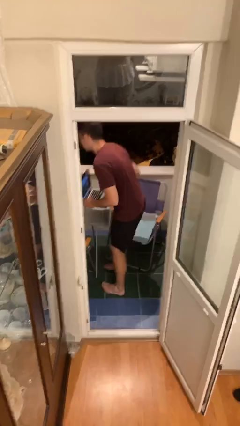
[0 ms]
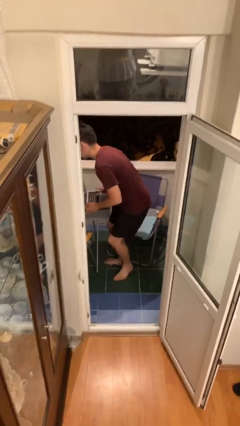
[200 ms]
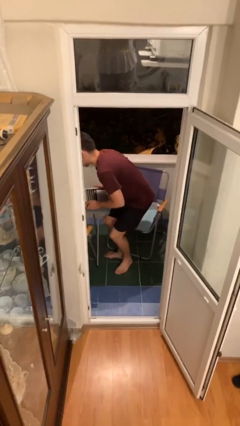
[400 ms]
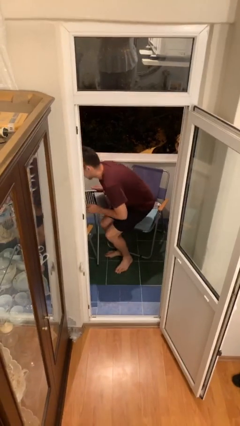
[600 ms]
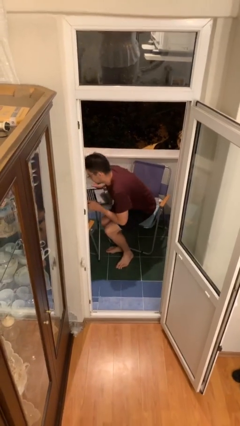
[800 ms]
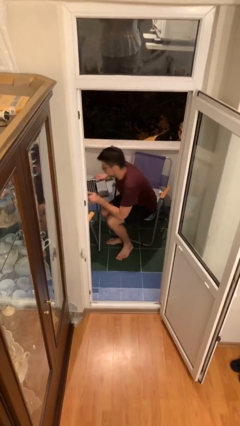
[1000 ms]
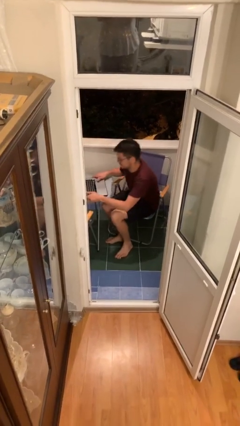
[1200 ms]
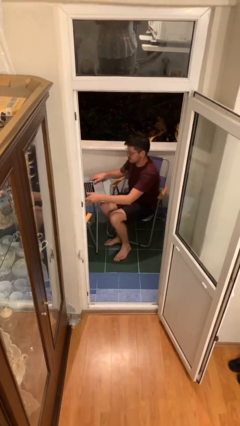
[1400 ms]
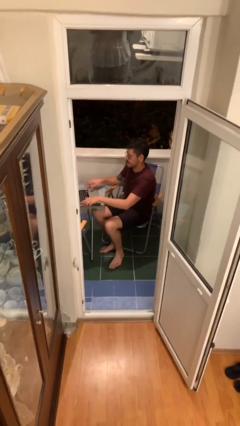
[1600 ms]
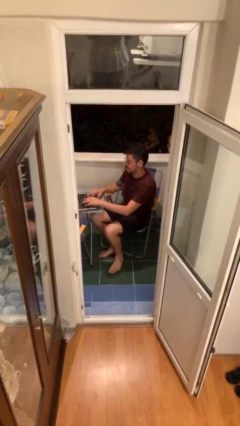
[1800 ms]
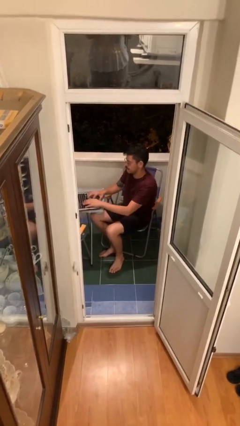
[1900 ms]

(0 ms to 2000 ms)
person sits down

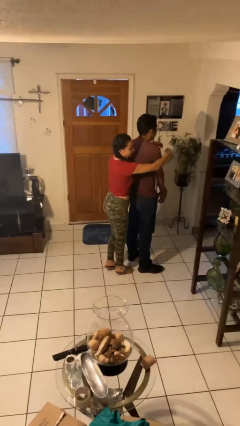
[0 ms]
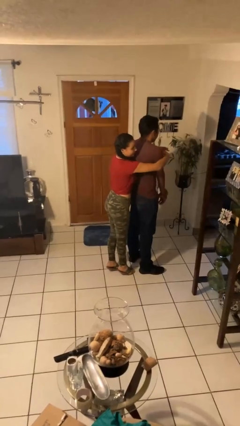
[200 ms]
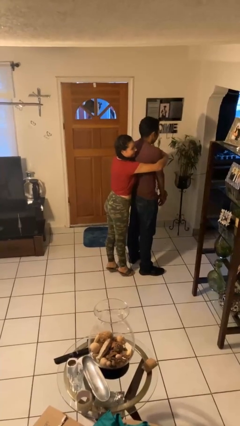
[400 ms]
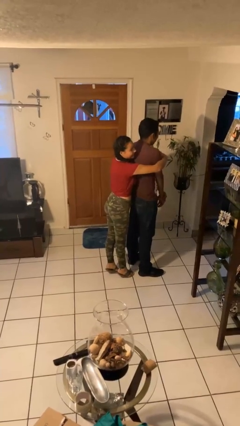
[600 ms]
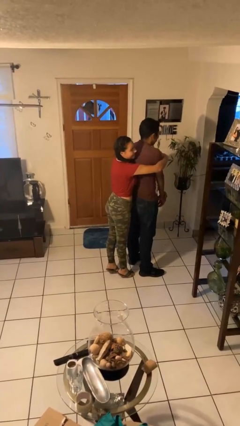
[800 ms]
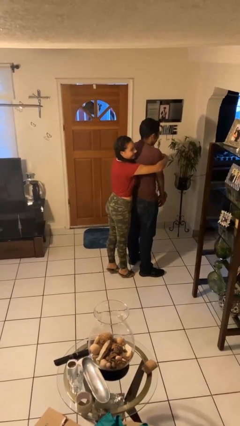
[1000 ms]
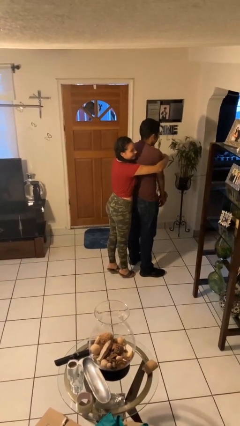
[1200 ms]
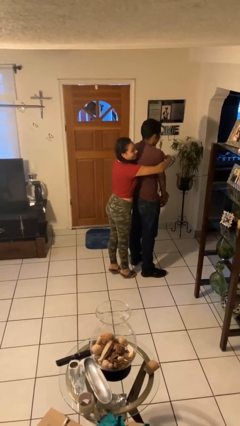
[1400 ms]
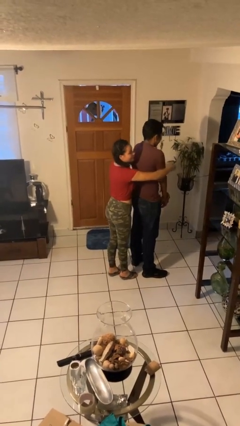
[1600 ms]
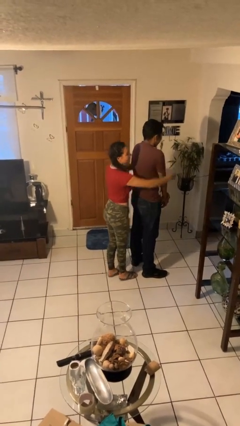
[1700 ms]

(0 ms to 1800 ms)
person hugs person from behind

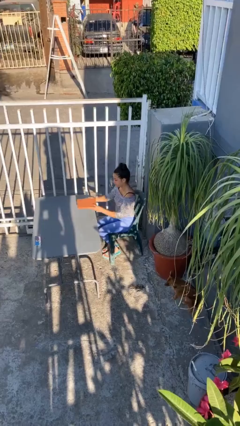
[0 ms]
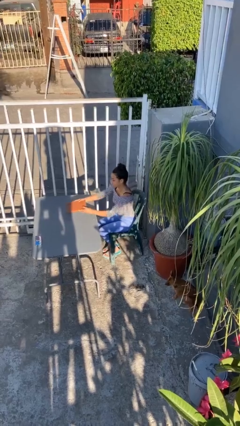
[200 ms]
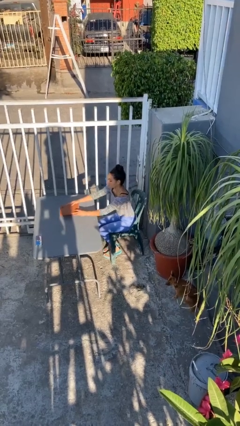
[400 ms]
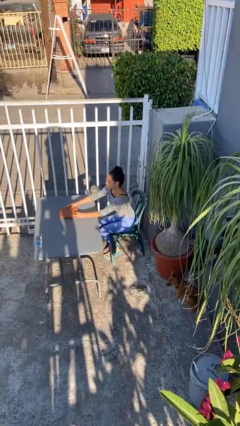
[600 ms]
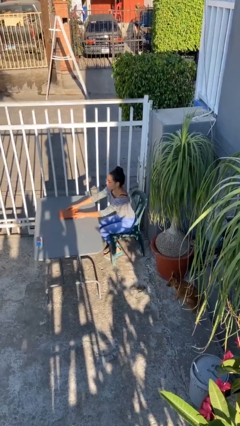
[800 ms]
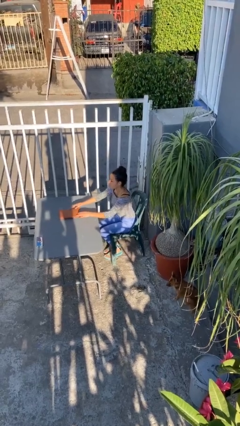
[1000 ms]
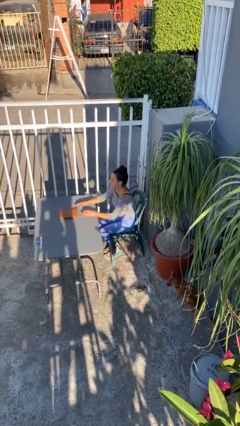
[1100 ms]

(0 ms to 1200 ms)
person puts down object on table

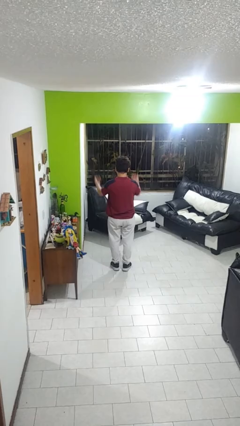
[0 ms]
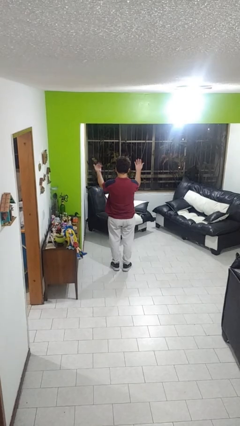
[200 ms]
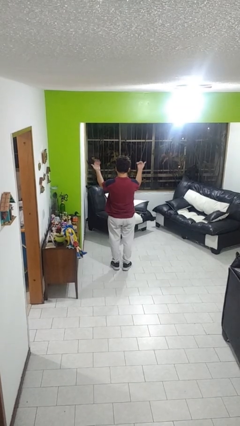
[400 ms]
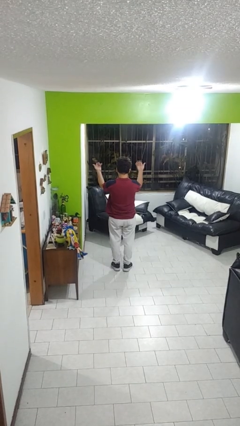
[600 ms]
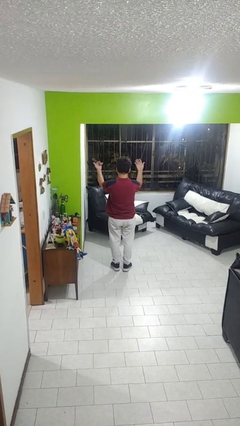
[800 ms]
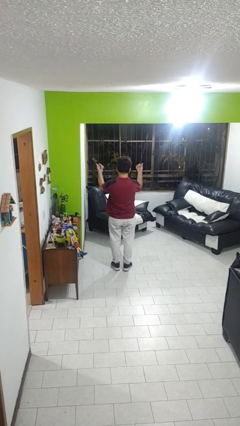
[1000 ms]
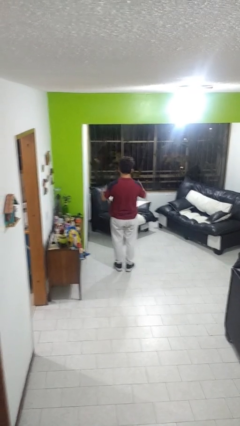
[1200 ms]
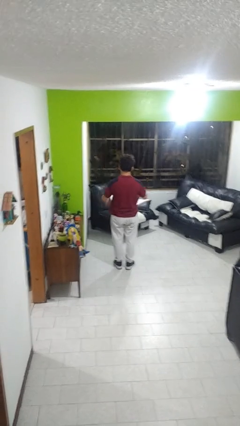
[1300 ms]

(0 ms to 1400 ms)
person gestures come here

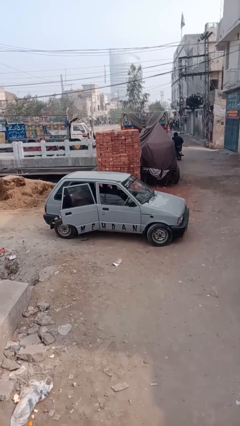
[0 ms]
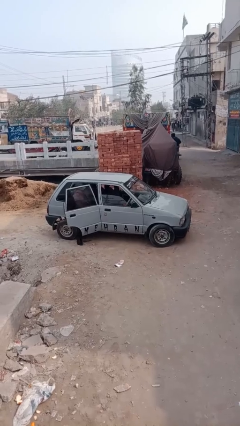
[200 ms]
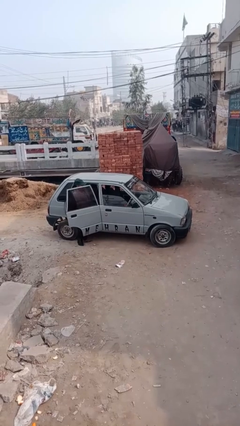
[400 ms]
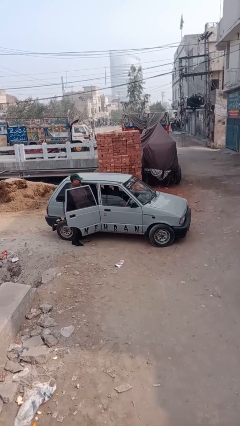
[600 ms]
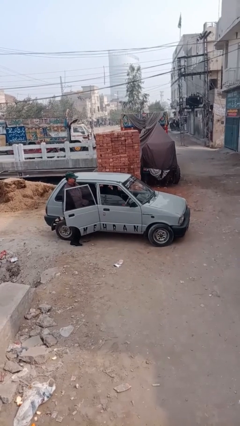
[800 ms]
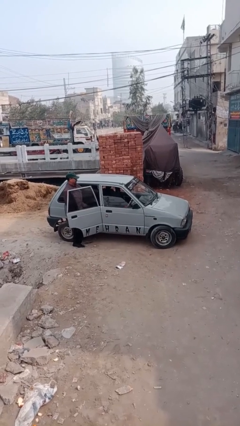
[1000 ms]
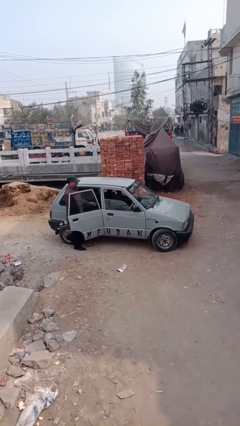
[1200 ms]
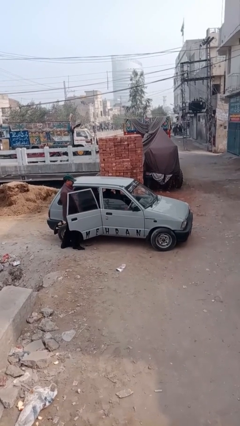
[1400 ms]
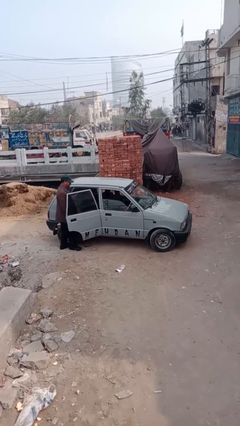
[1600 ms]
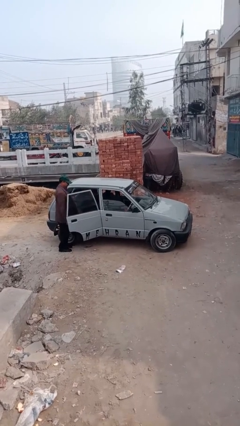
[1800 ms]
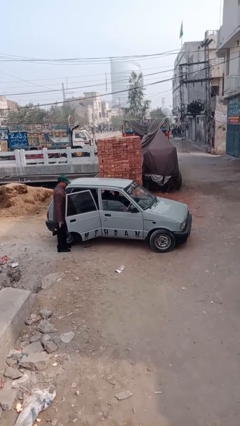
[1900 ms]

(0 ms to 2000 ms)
car drops off person

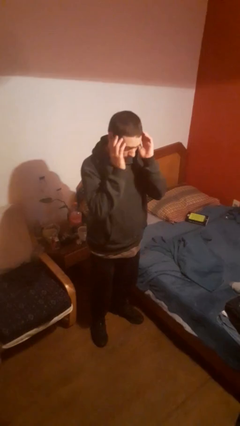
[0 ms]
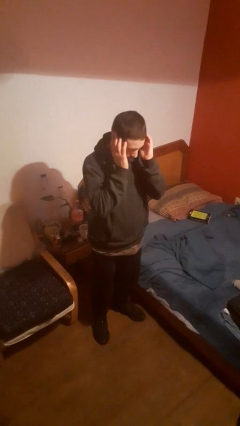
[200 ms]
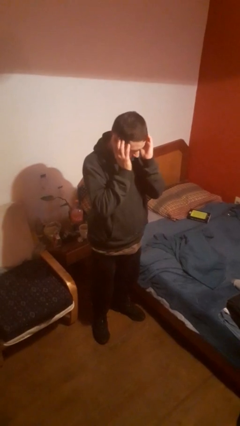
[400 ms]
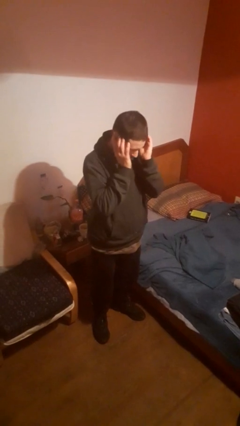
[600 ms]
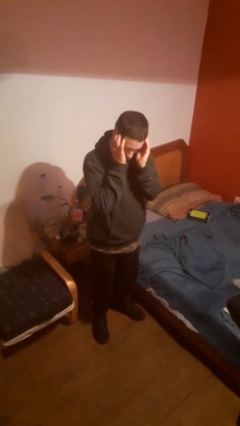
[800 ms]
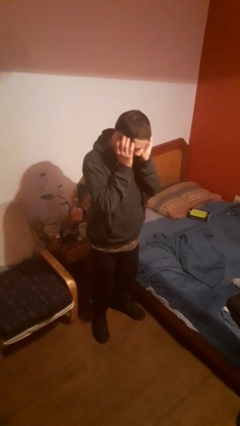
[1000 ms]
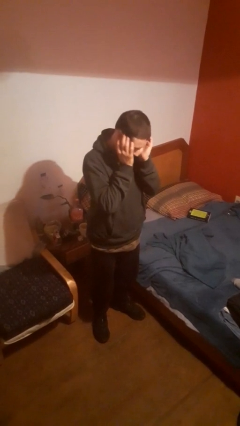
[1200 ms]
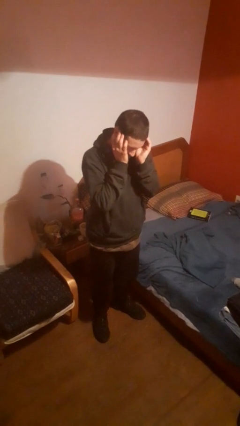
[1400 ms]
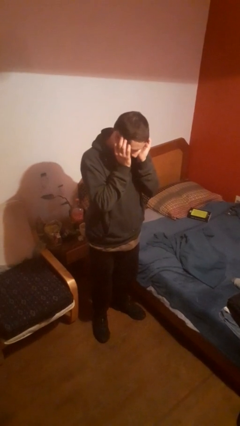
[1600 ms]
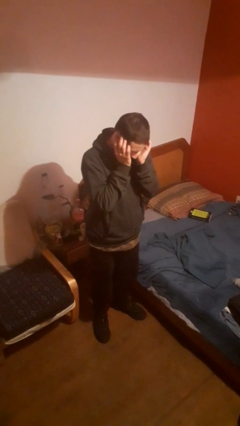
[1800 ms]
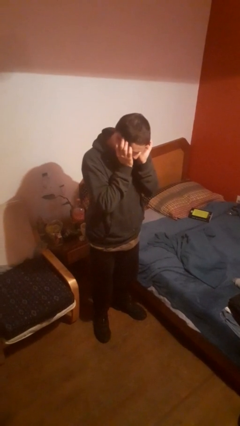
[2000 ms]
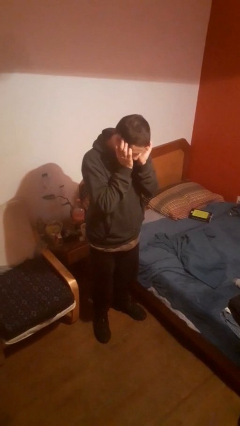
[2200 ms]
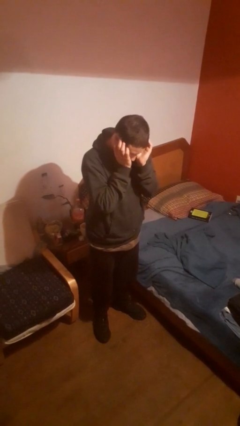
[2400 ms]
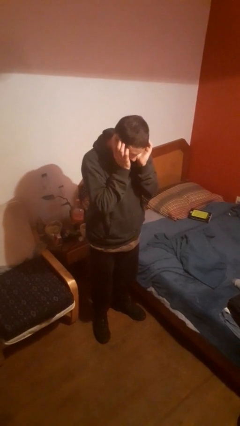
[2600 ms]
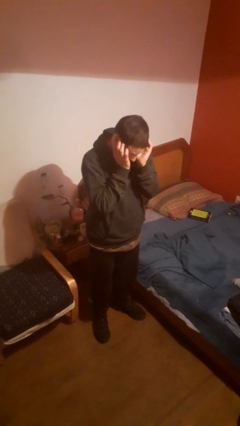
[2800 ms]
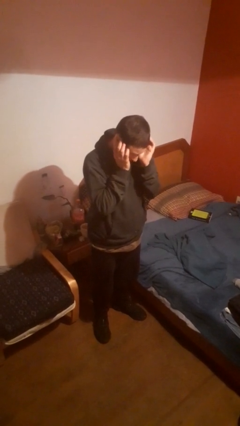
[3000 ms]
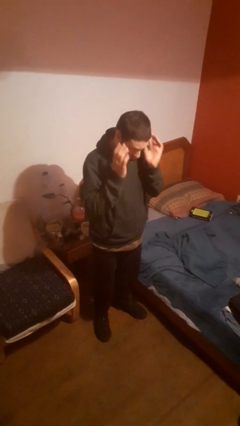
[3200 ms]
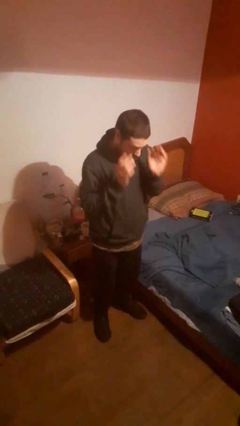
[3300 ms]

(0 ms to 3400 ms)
person puts fingers in ear

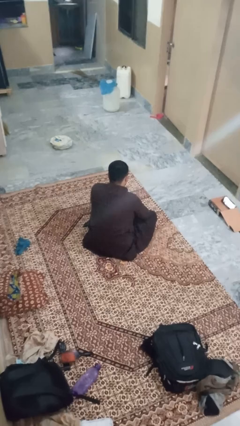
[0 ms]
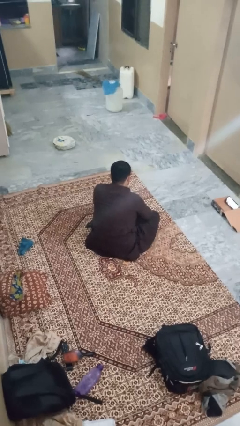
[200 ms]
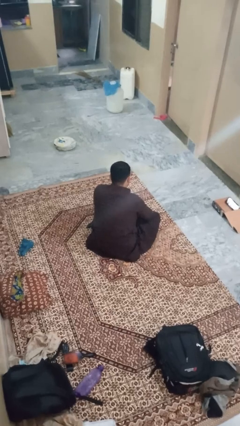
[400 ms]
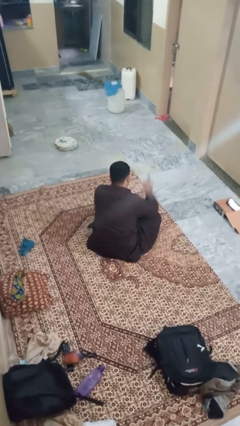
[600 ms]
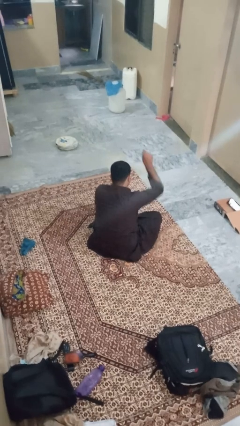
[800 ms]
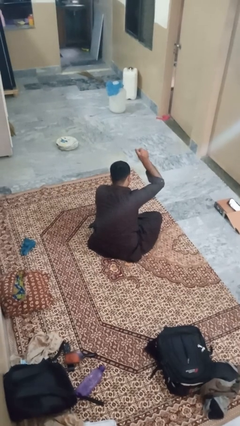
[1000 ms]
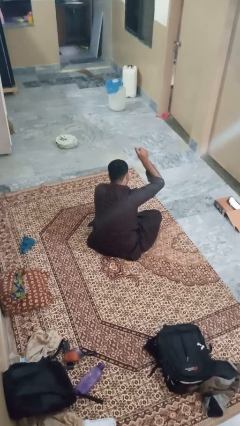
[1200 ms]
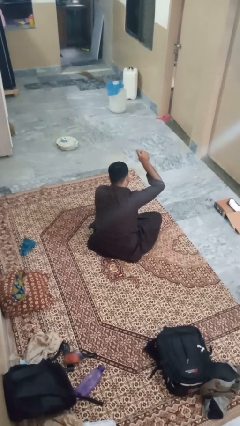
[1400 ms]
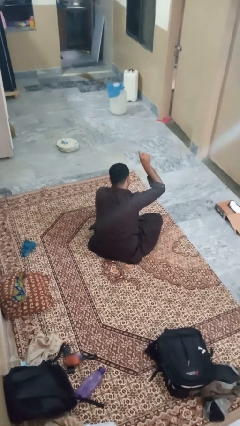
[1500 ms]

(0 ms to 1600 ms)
person gestures number one

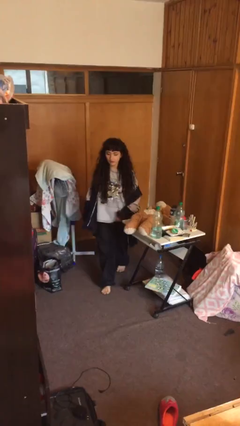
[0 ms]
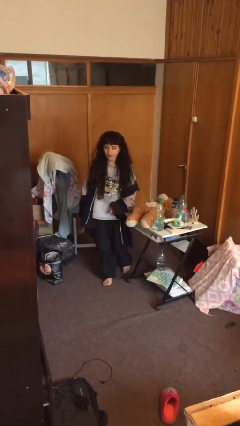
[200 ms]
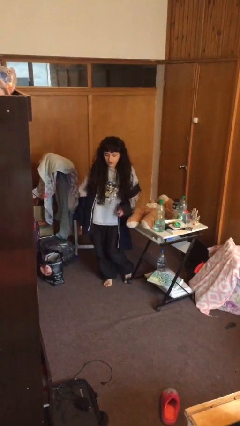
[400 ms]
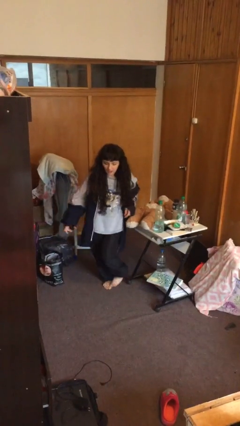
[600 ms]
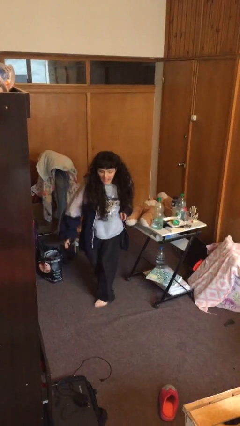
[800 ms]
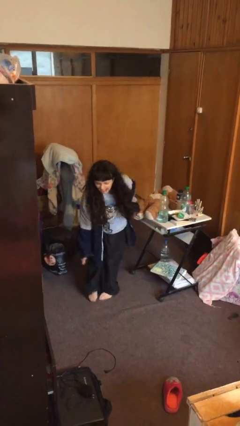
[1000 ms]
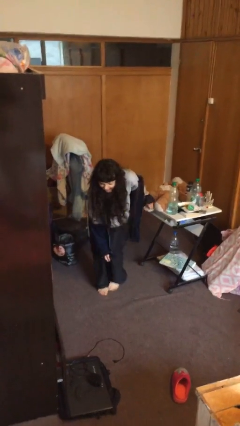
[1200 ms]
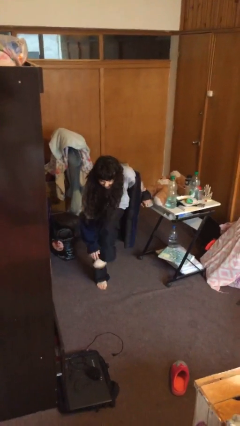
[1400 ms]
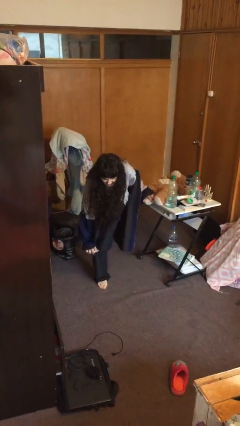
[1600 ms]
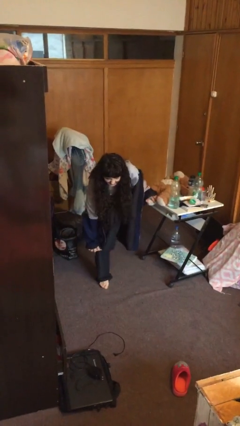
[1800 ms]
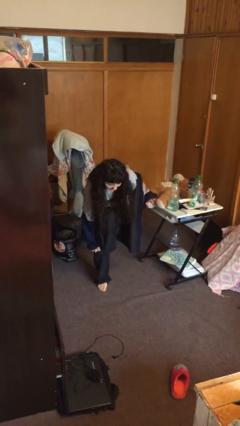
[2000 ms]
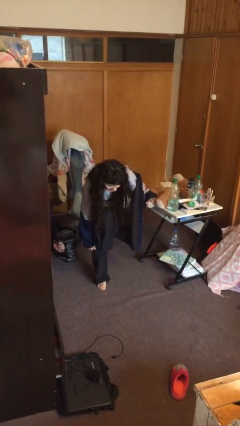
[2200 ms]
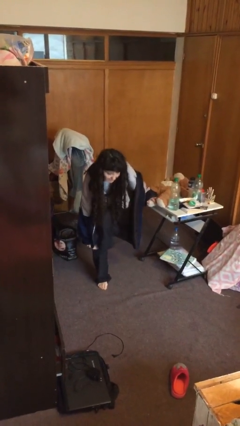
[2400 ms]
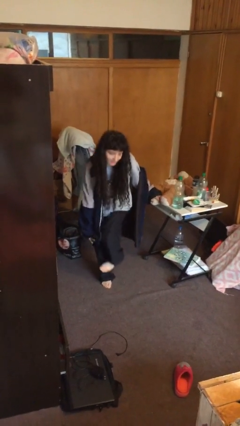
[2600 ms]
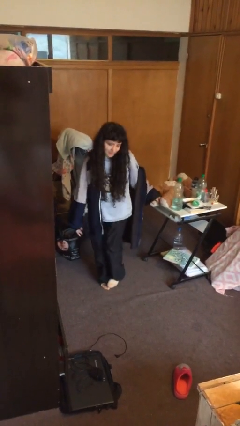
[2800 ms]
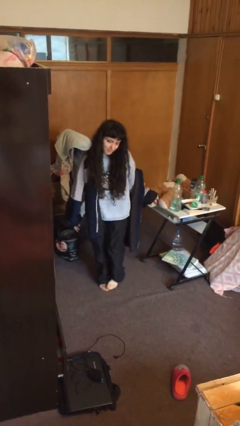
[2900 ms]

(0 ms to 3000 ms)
person stubs toe

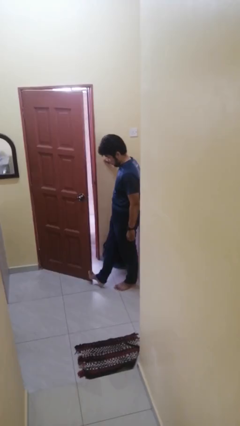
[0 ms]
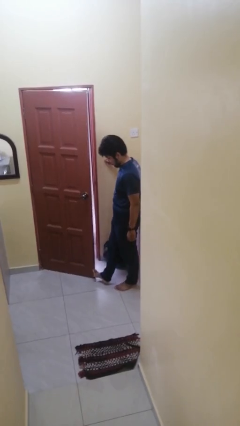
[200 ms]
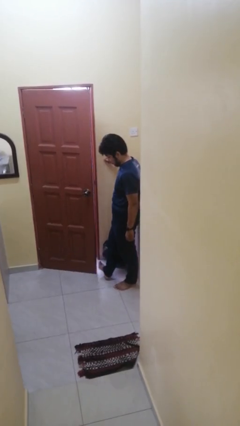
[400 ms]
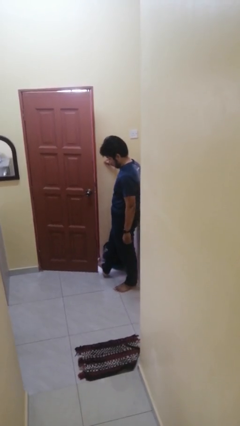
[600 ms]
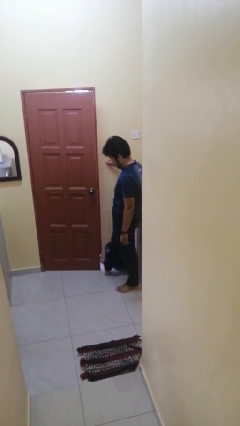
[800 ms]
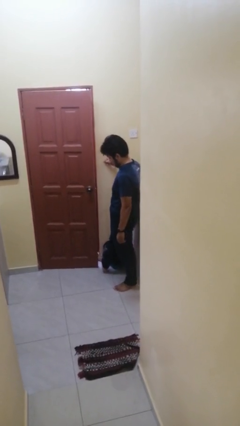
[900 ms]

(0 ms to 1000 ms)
person closes door with foot
